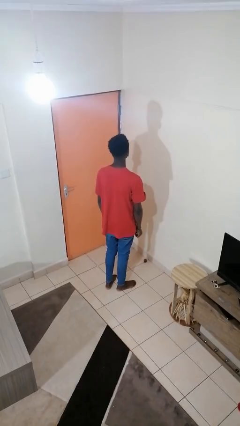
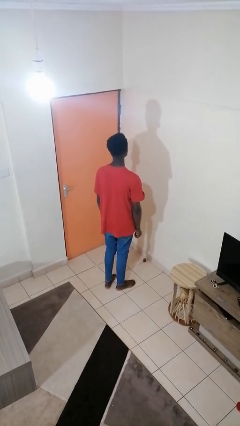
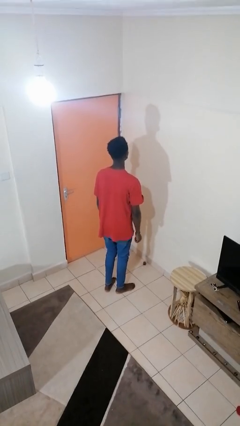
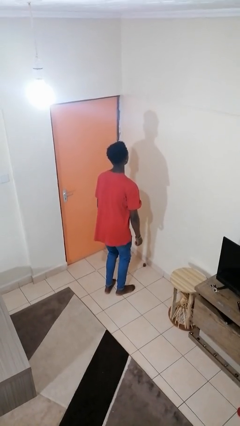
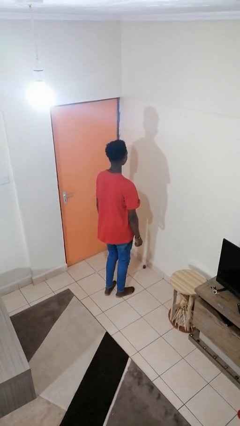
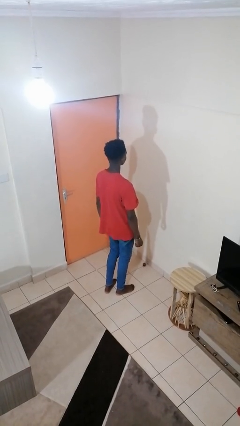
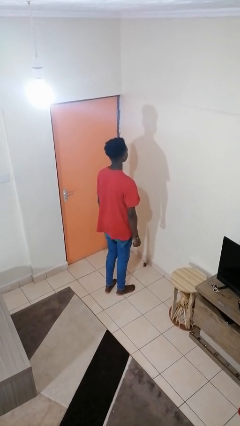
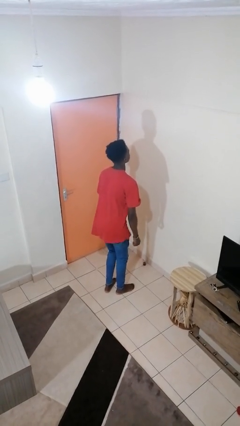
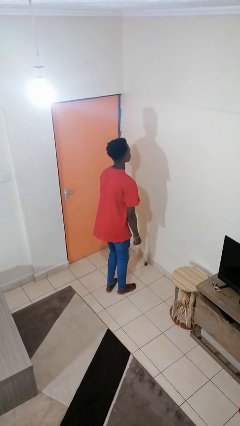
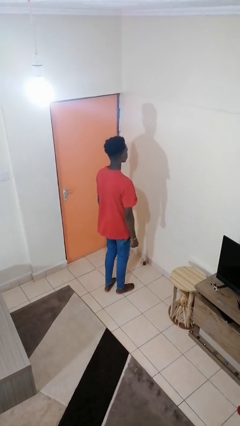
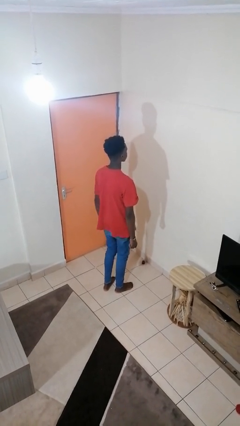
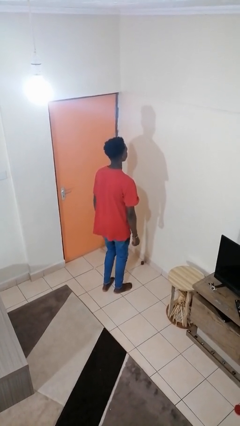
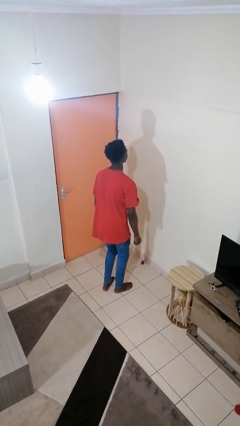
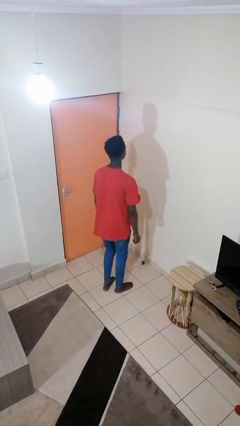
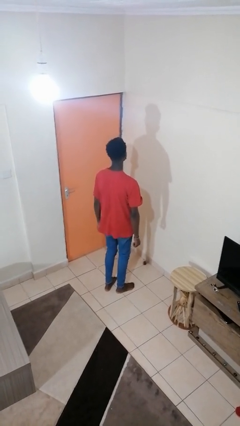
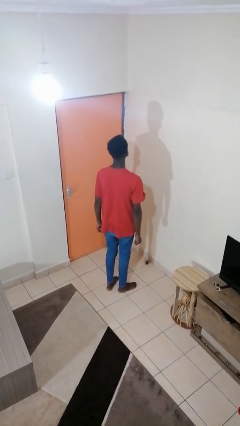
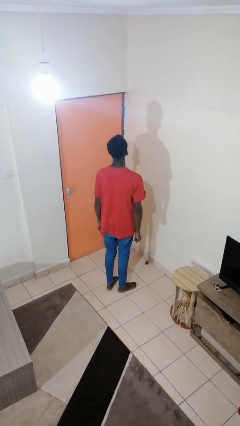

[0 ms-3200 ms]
person wiggles hips

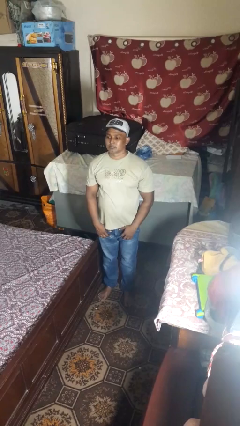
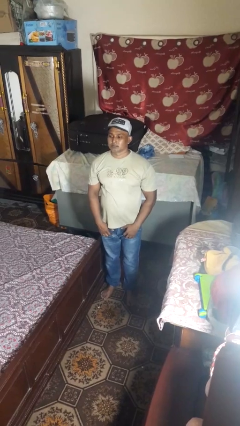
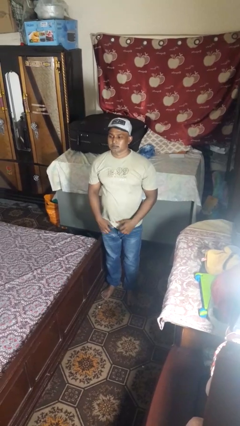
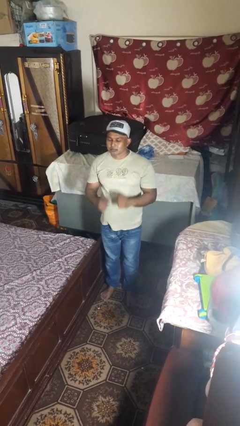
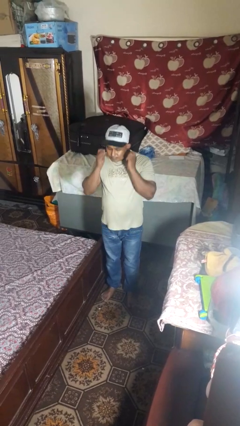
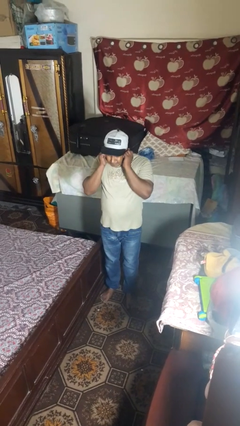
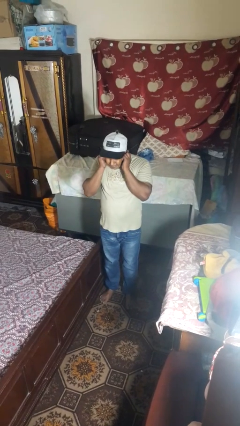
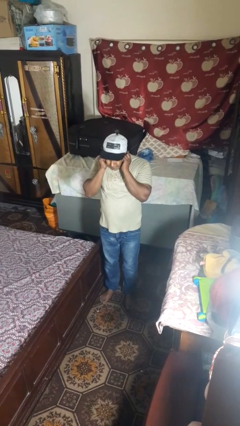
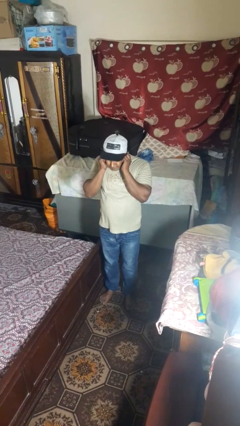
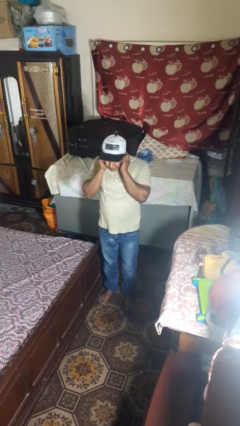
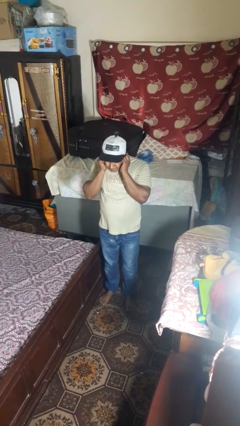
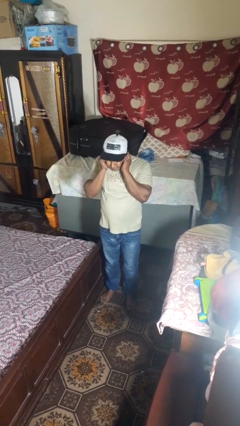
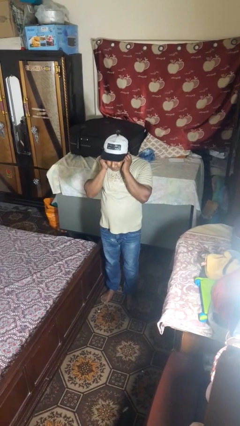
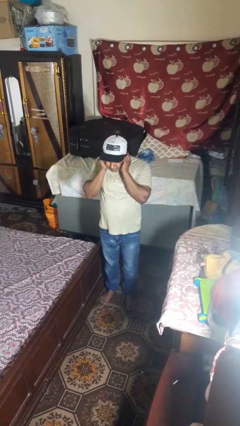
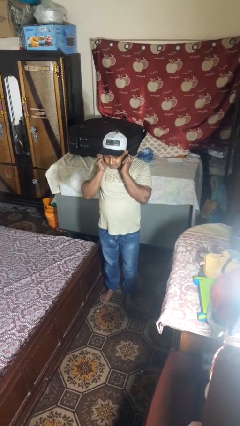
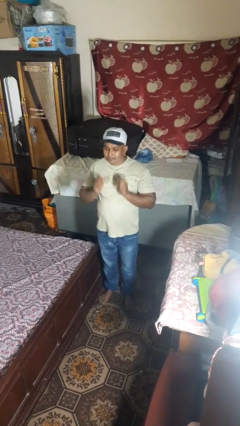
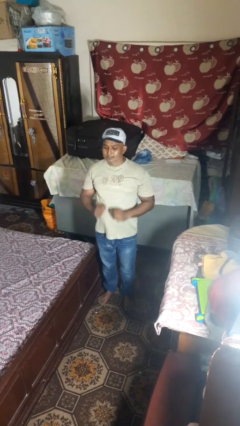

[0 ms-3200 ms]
person puts fingers in ear

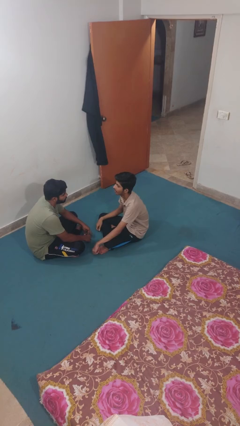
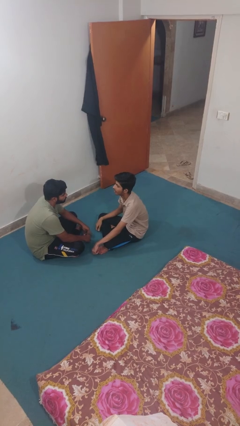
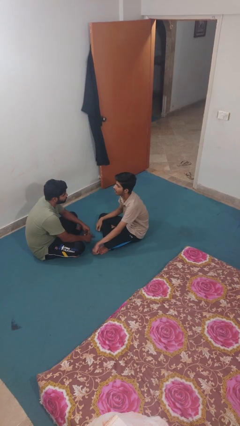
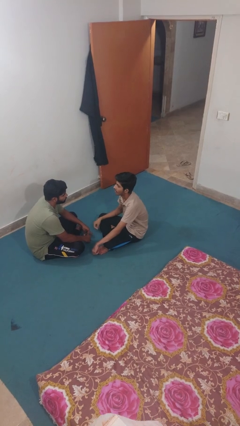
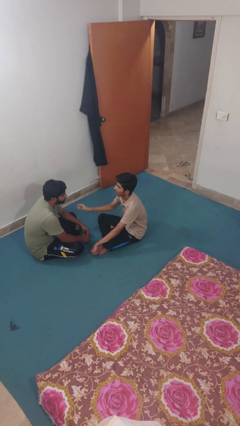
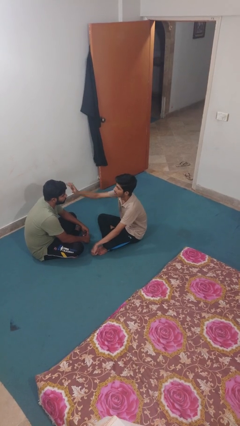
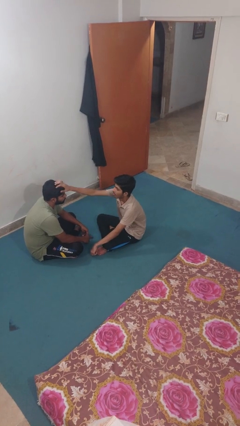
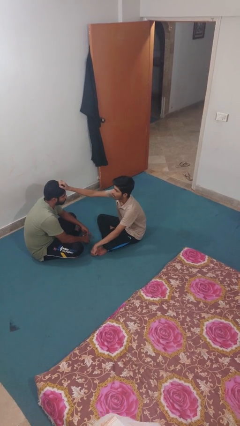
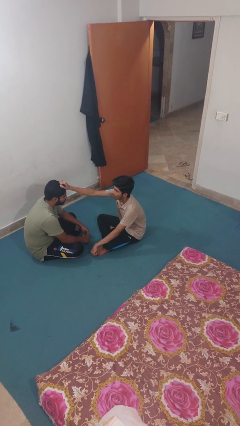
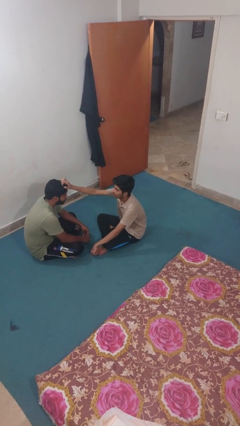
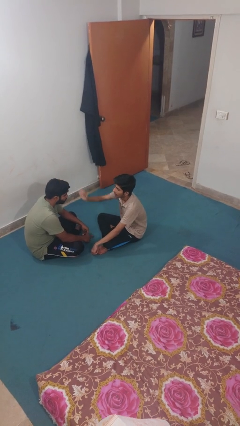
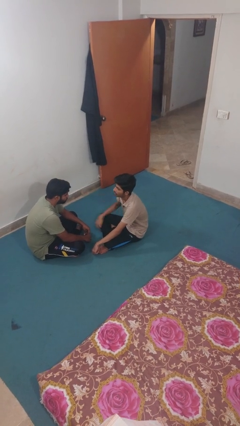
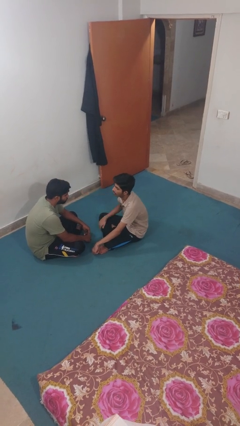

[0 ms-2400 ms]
person grabs person by hair

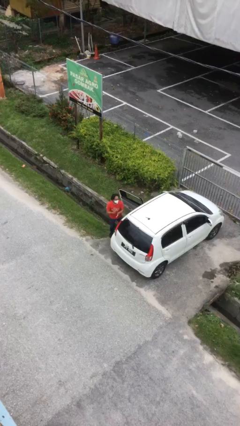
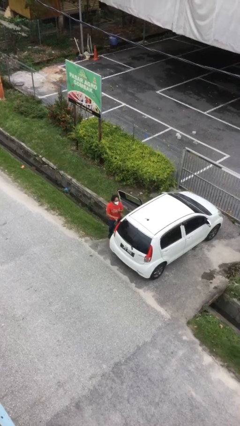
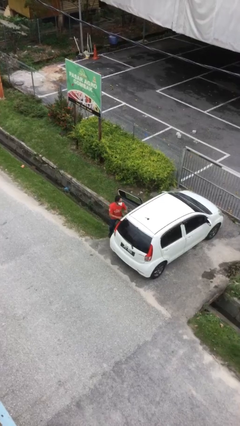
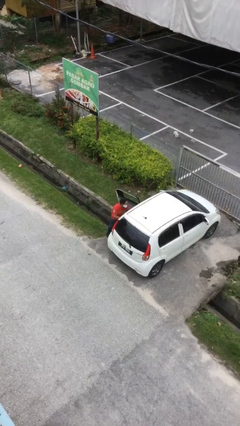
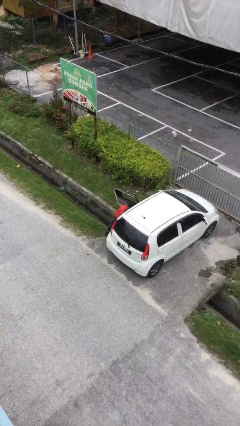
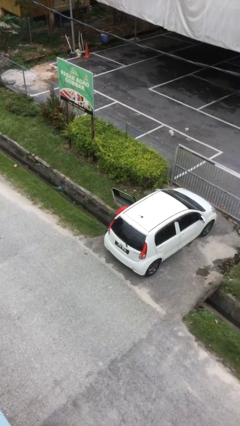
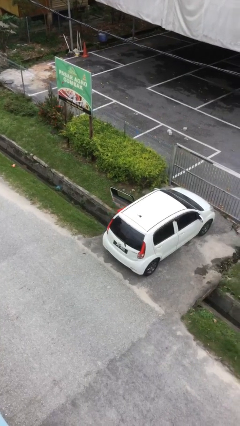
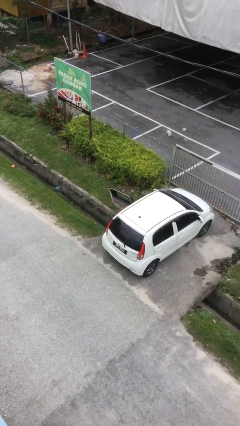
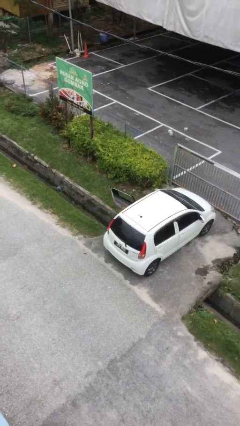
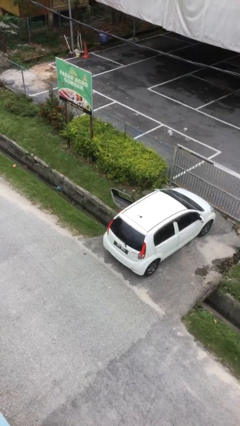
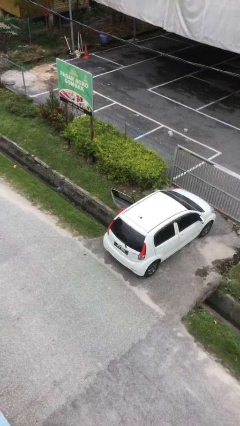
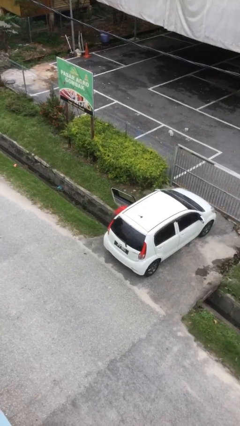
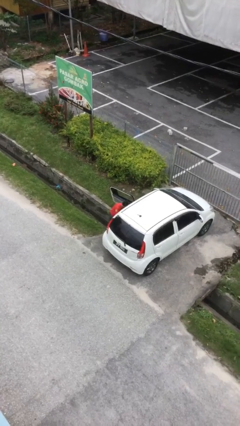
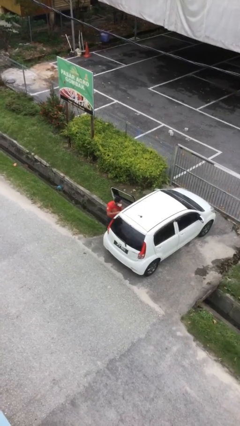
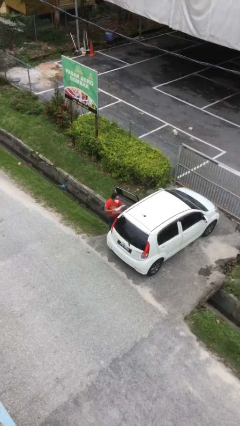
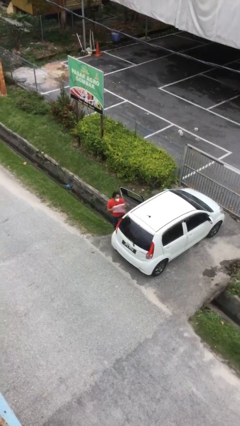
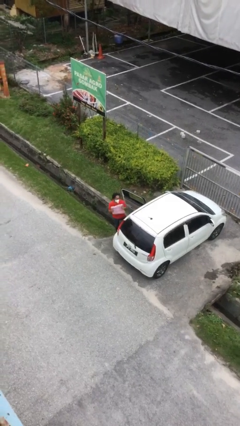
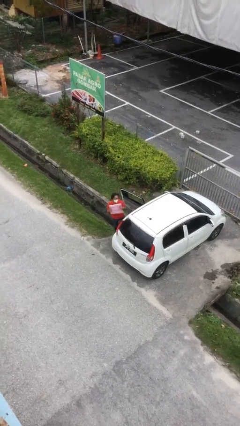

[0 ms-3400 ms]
person unloads car

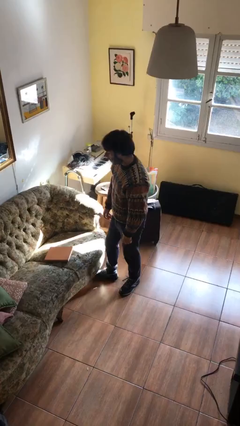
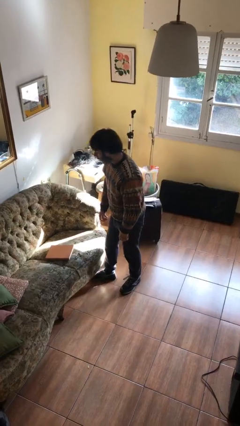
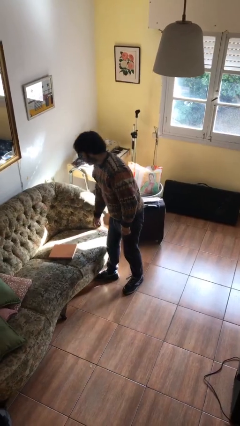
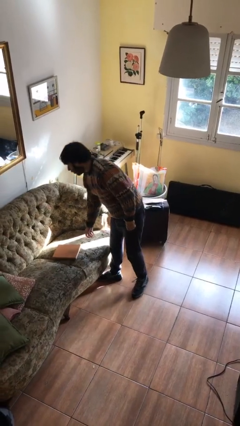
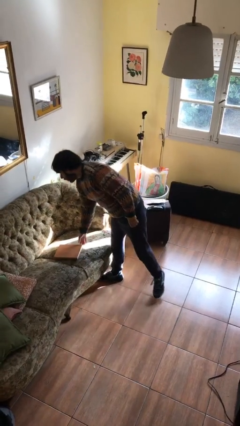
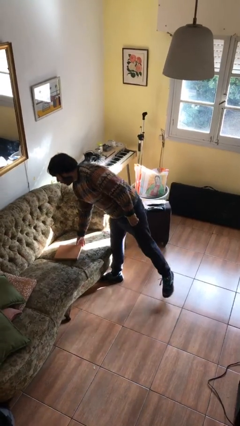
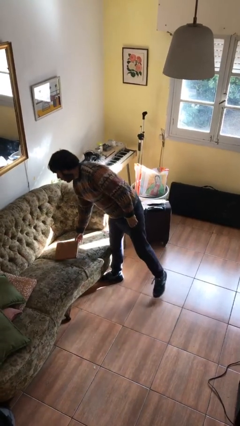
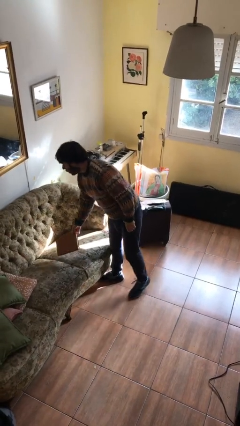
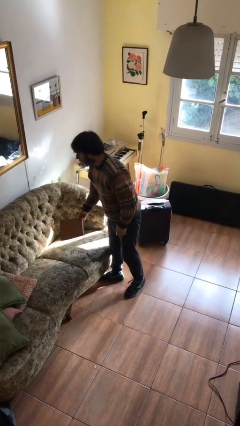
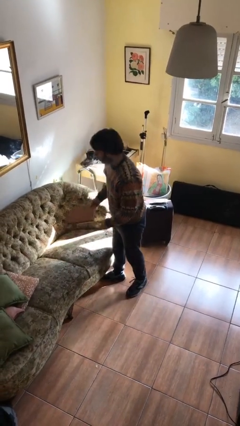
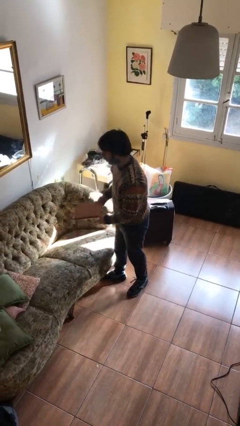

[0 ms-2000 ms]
person picks up object from couch

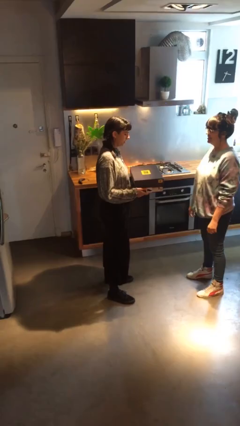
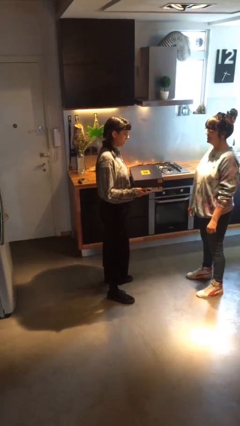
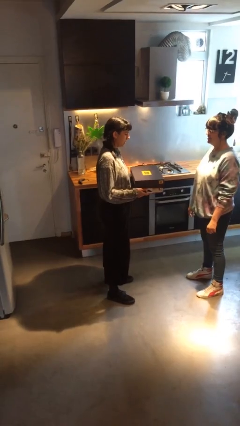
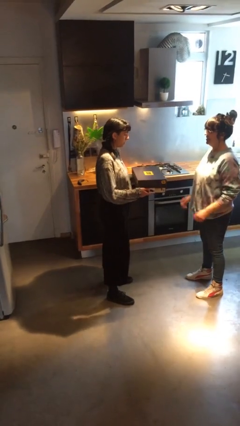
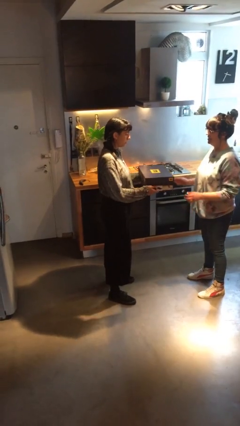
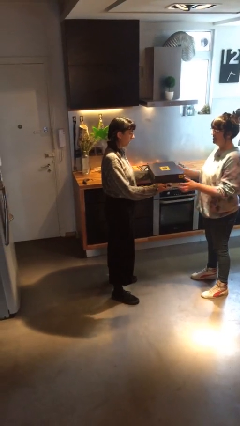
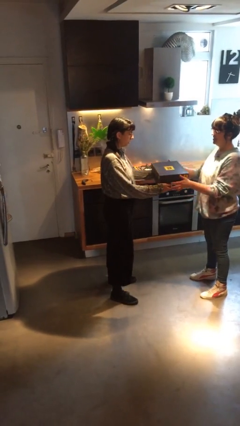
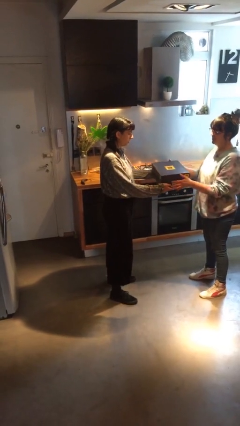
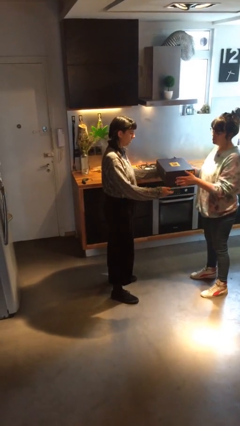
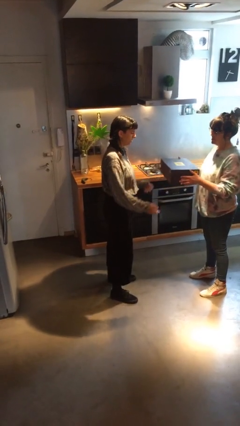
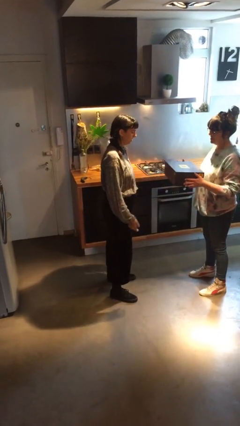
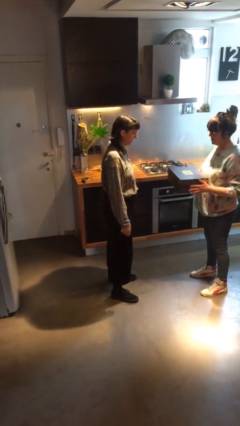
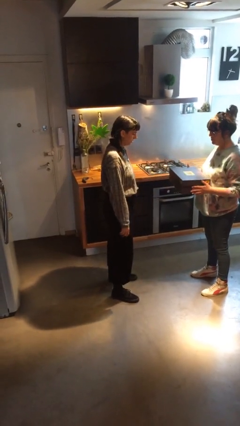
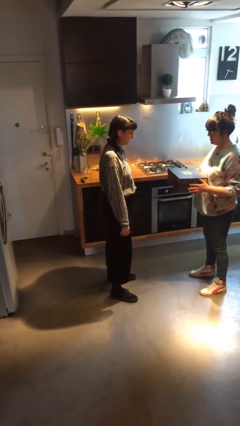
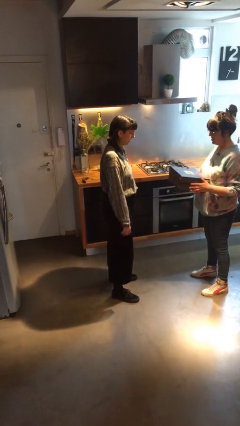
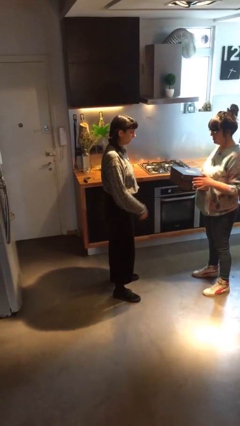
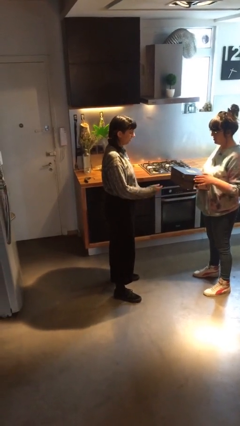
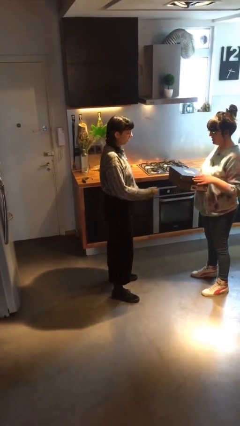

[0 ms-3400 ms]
person transfers object to person
